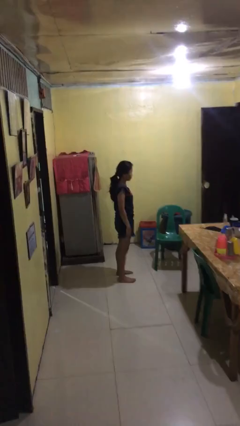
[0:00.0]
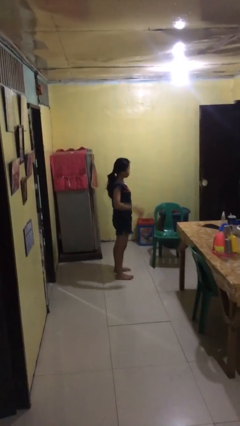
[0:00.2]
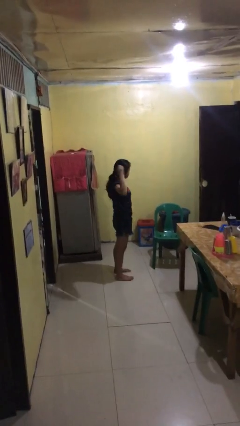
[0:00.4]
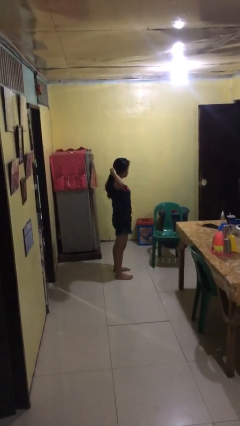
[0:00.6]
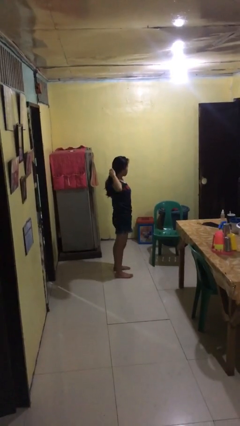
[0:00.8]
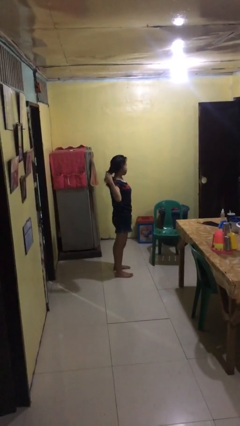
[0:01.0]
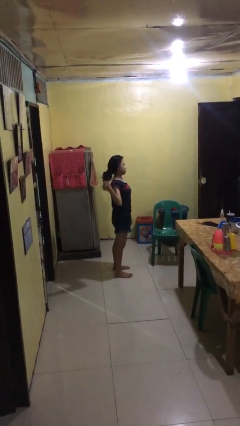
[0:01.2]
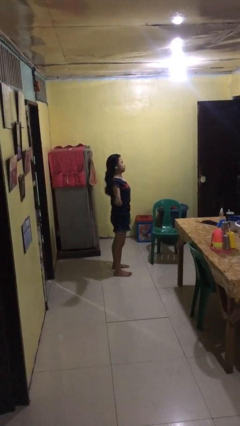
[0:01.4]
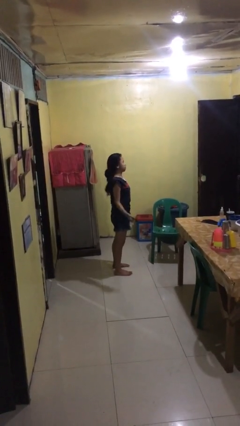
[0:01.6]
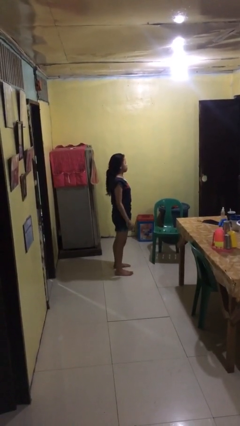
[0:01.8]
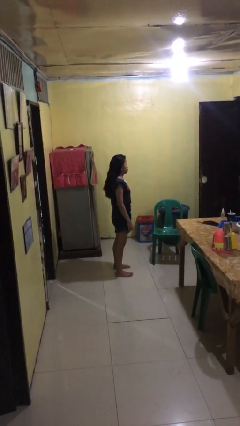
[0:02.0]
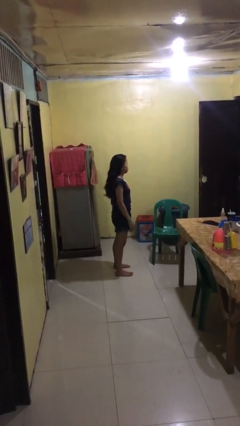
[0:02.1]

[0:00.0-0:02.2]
person takes off hairtie

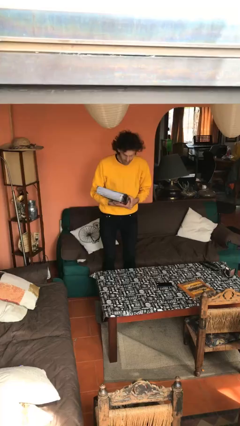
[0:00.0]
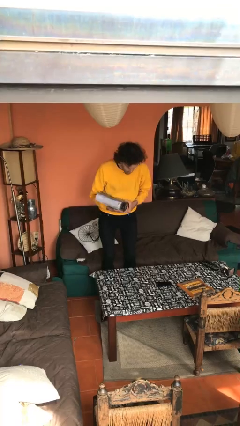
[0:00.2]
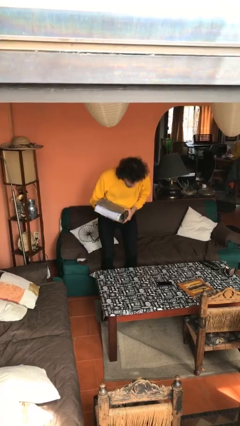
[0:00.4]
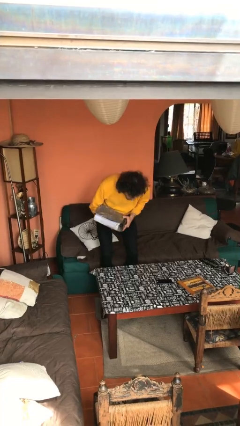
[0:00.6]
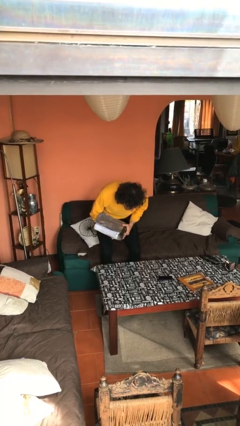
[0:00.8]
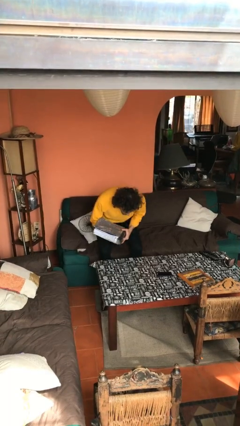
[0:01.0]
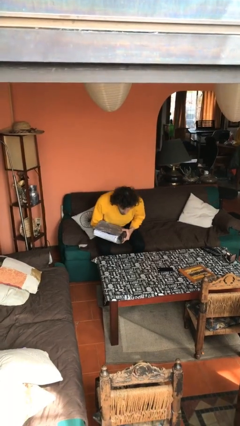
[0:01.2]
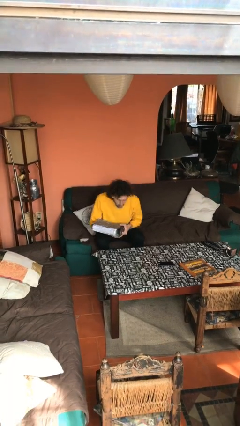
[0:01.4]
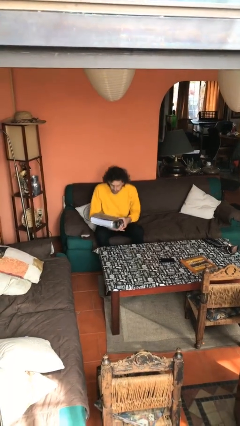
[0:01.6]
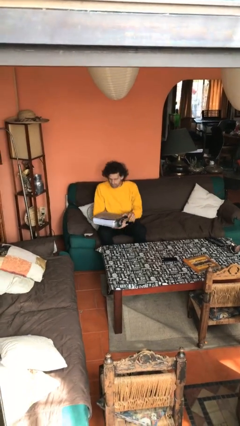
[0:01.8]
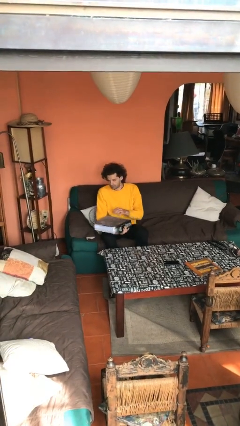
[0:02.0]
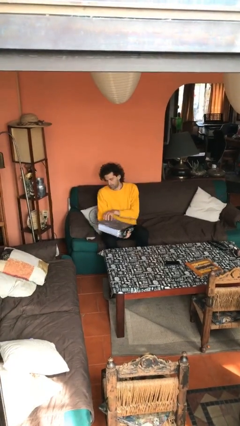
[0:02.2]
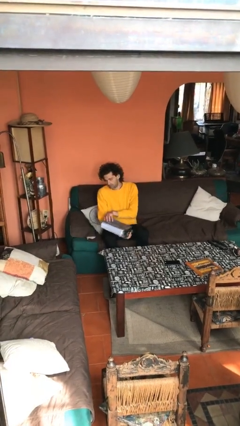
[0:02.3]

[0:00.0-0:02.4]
person sits down

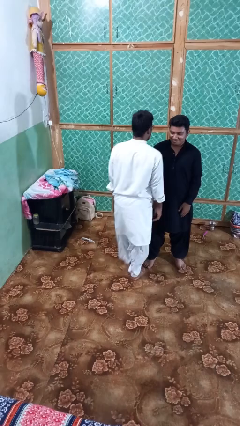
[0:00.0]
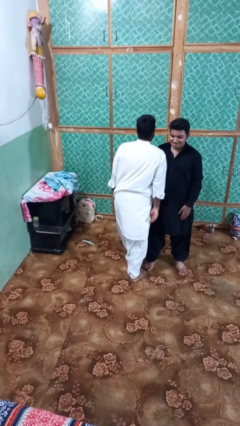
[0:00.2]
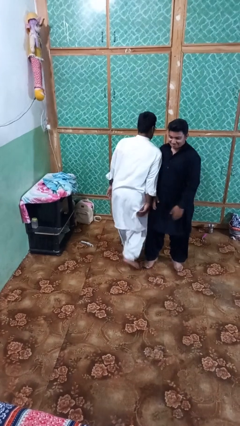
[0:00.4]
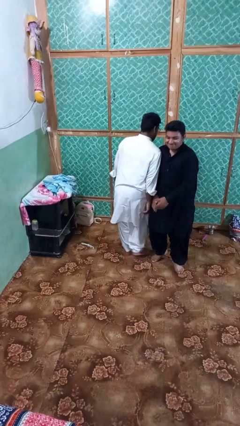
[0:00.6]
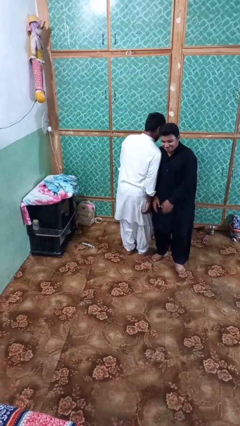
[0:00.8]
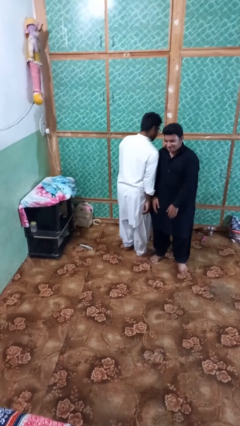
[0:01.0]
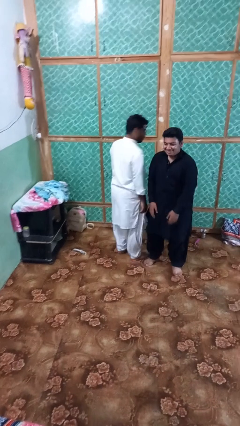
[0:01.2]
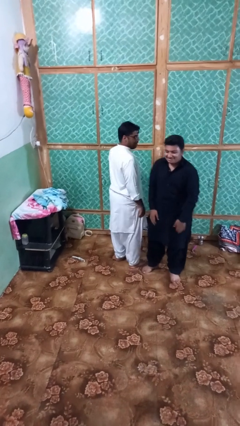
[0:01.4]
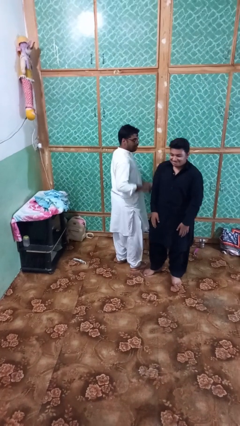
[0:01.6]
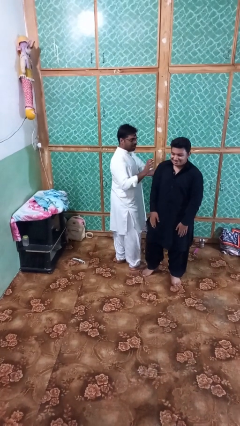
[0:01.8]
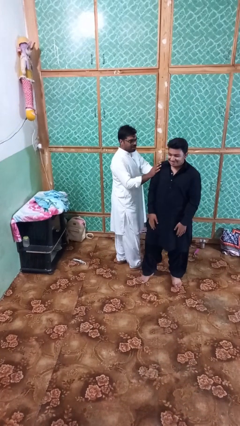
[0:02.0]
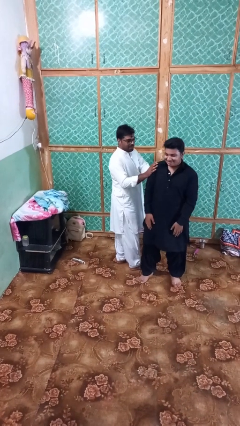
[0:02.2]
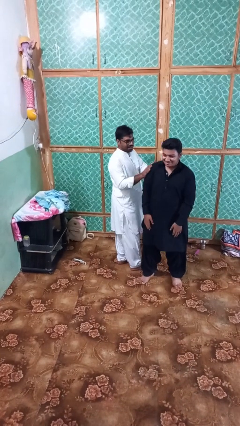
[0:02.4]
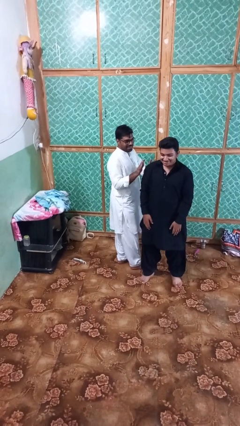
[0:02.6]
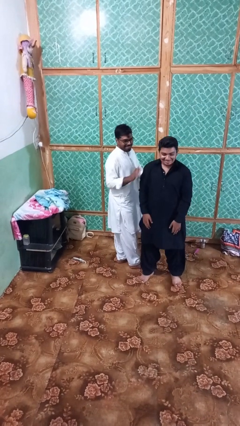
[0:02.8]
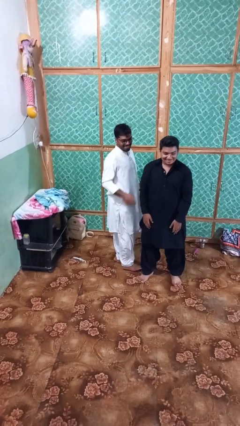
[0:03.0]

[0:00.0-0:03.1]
person bumps into person

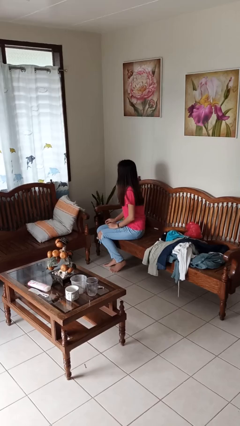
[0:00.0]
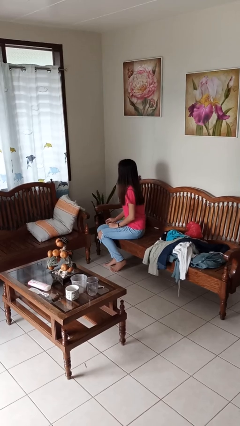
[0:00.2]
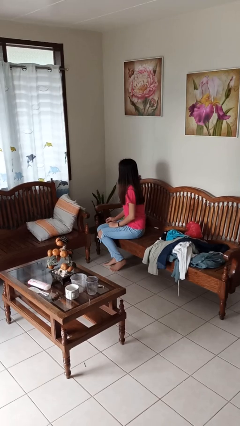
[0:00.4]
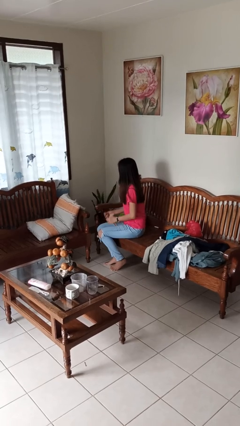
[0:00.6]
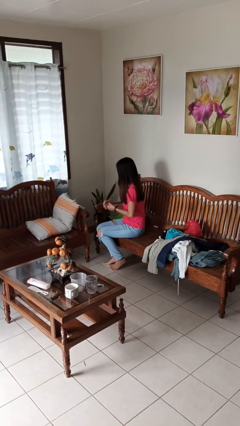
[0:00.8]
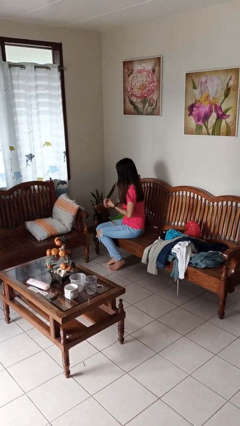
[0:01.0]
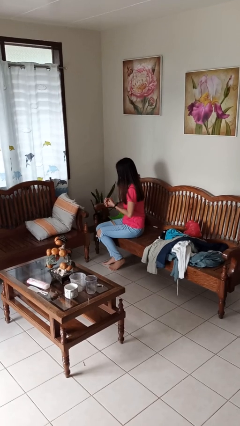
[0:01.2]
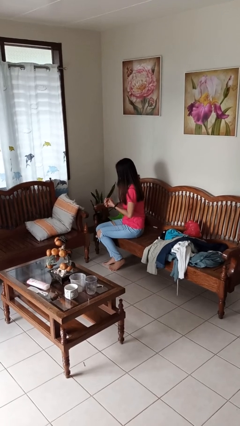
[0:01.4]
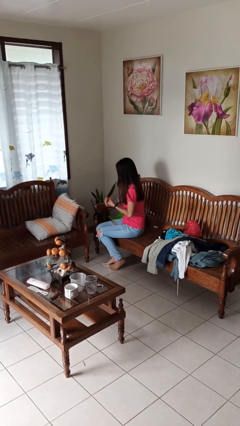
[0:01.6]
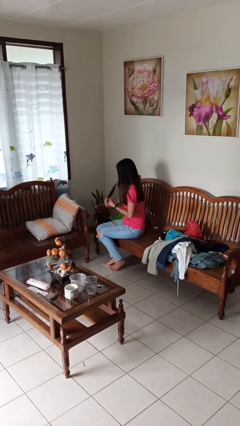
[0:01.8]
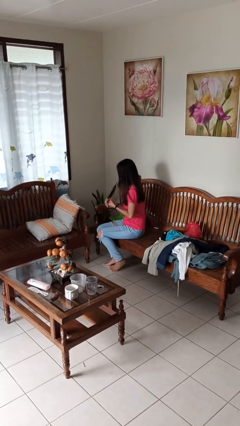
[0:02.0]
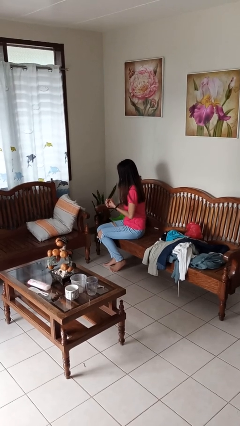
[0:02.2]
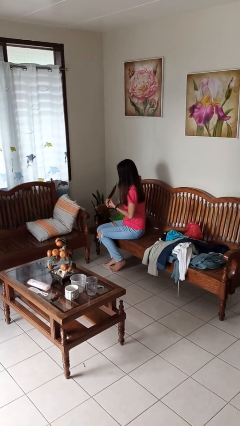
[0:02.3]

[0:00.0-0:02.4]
person files fingernails

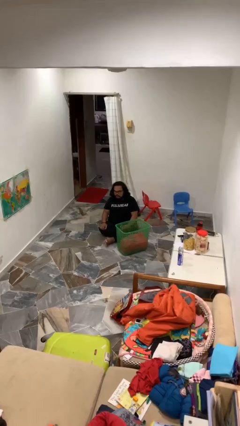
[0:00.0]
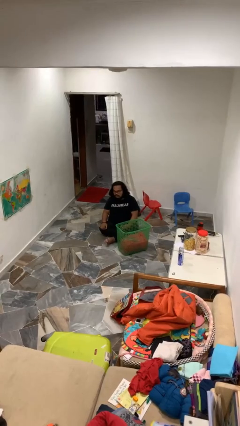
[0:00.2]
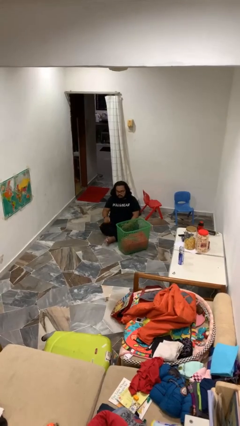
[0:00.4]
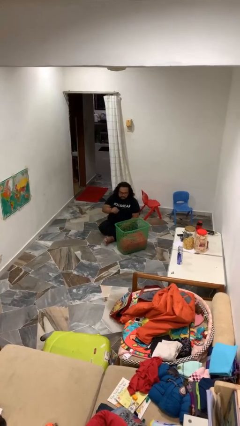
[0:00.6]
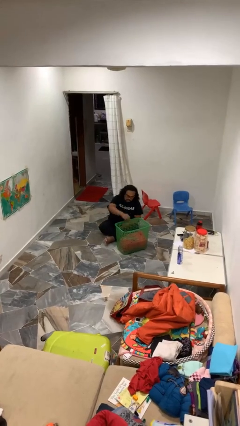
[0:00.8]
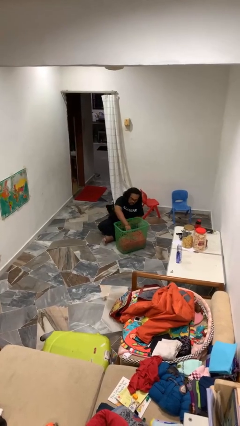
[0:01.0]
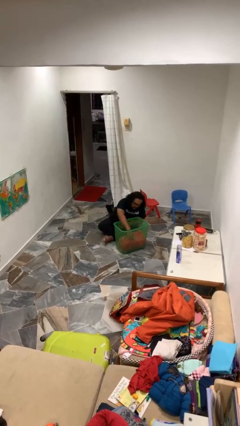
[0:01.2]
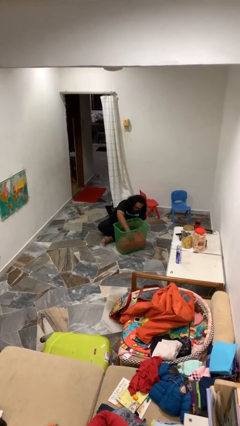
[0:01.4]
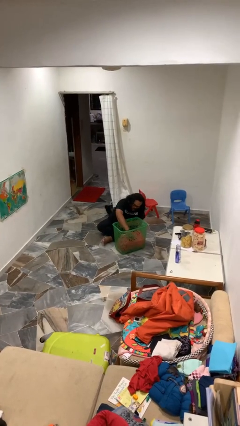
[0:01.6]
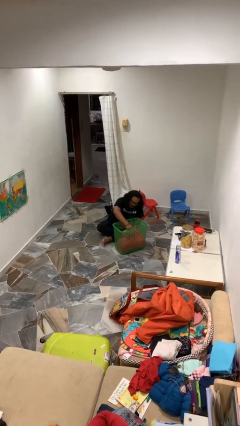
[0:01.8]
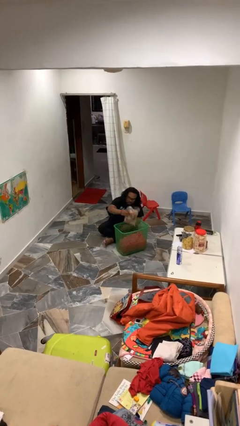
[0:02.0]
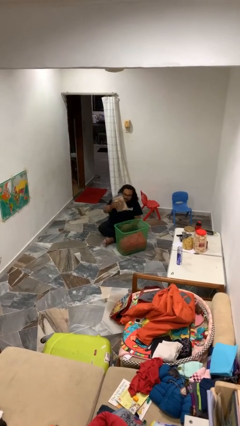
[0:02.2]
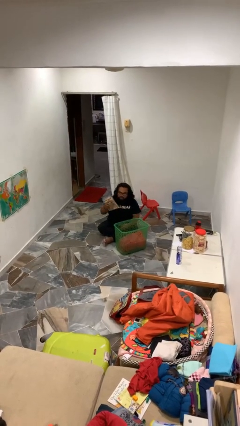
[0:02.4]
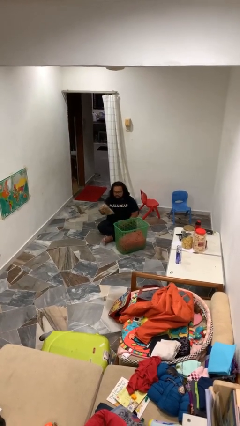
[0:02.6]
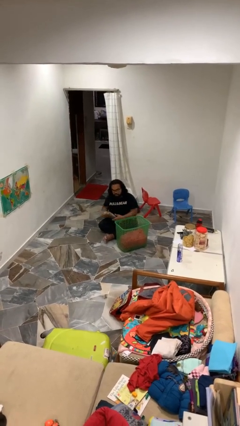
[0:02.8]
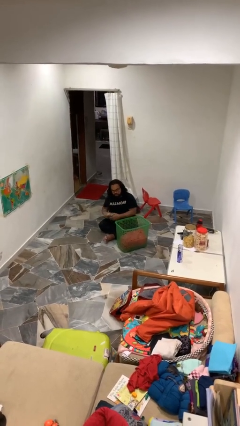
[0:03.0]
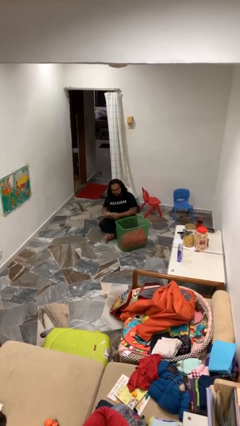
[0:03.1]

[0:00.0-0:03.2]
person takes object from basket

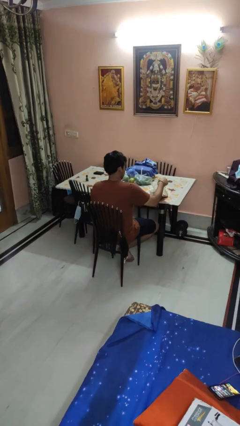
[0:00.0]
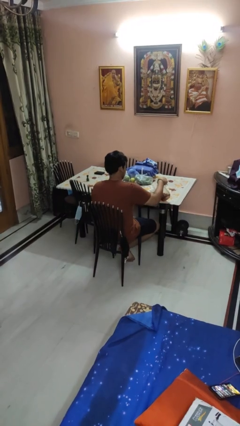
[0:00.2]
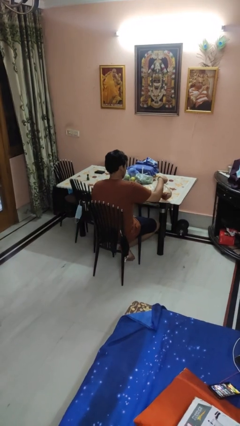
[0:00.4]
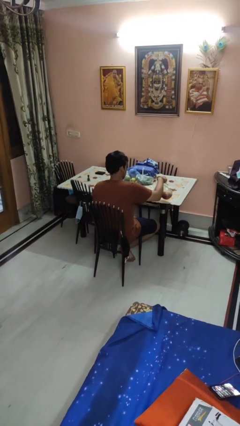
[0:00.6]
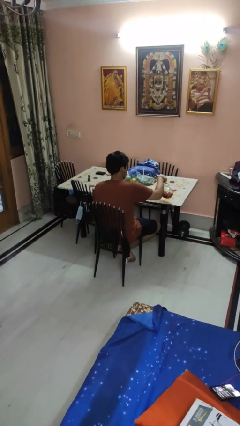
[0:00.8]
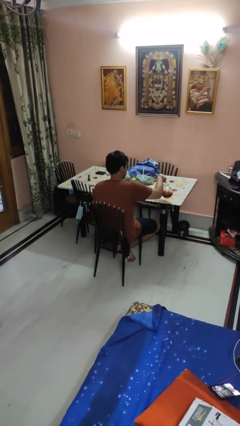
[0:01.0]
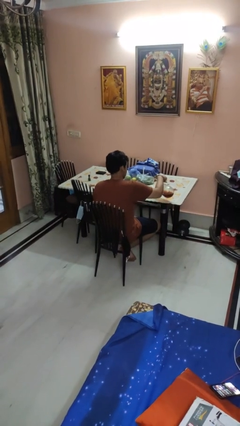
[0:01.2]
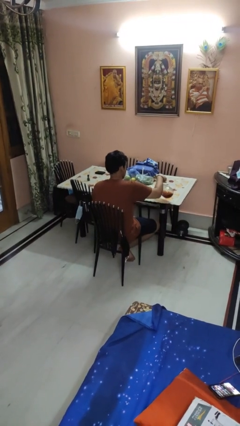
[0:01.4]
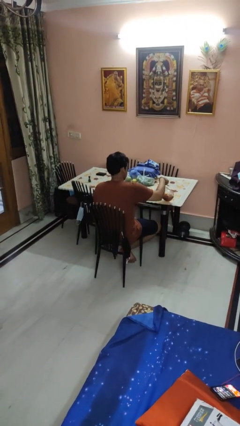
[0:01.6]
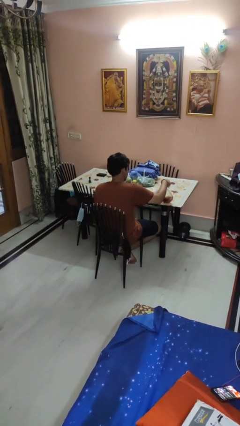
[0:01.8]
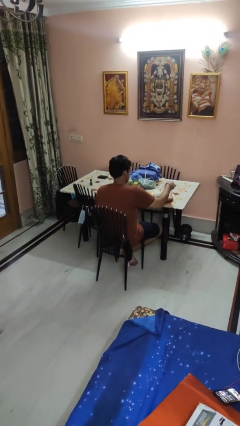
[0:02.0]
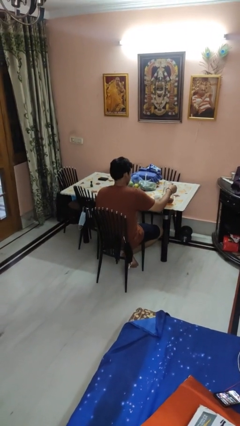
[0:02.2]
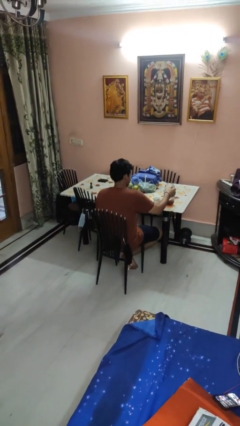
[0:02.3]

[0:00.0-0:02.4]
person pours coffee into mug

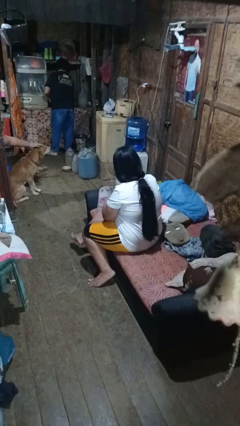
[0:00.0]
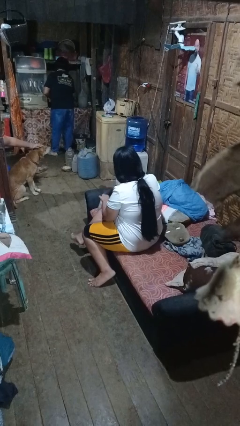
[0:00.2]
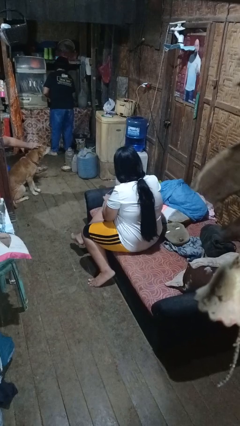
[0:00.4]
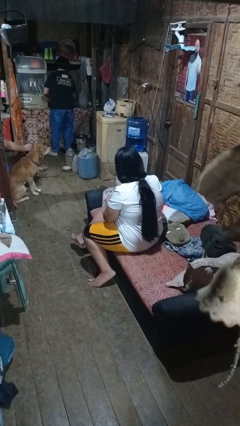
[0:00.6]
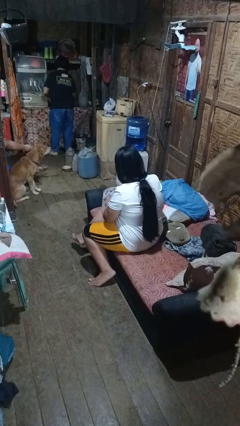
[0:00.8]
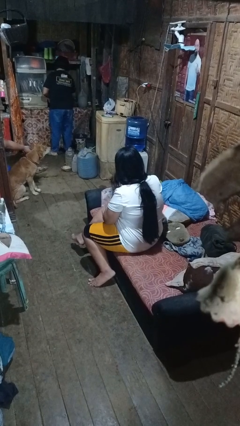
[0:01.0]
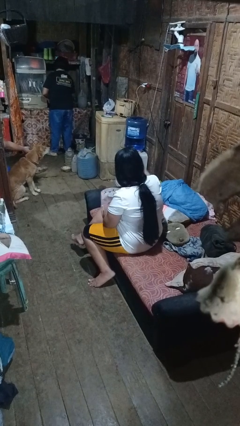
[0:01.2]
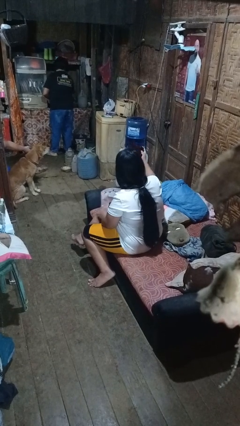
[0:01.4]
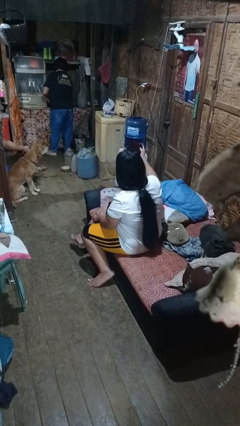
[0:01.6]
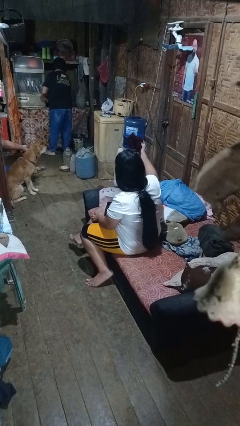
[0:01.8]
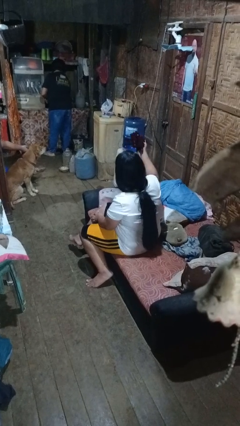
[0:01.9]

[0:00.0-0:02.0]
person searches in bag
